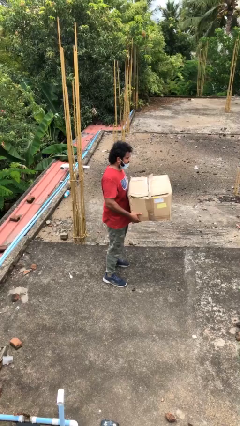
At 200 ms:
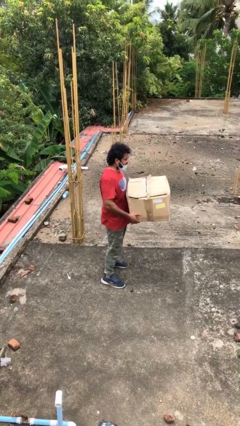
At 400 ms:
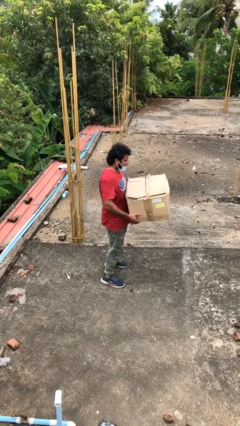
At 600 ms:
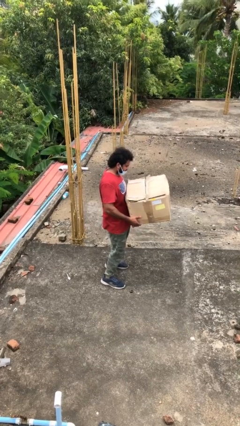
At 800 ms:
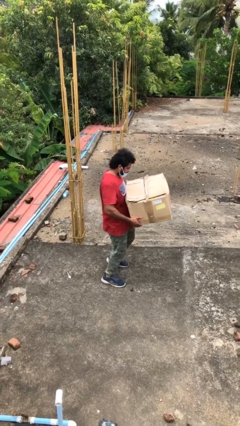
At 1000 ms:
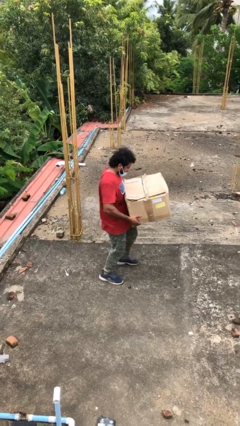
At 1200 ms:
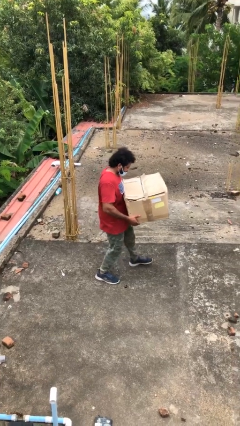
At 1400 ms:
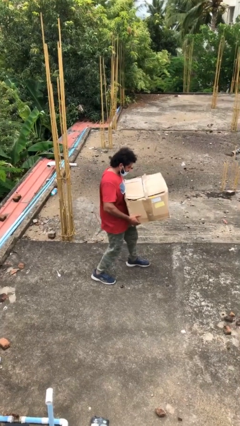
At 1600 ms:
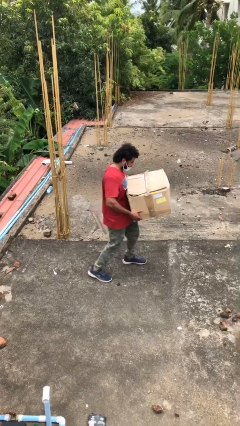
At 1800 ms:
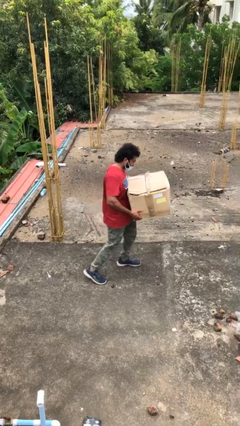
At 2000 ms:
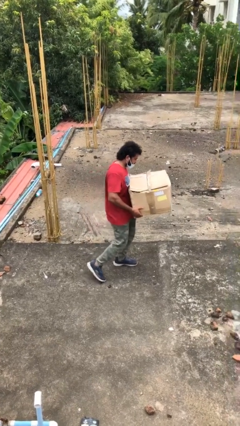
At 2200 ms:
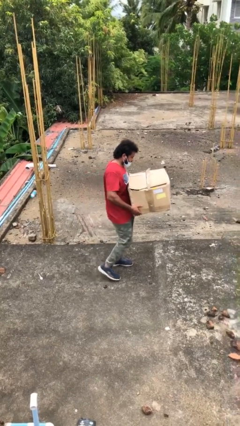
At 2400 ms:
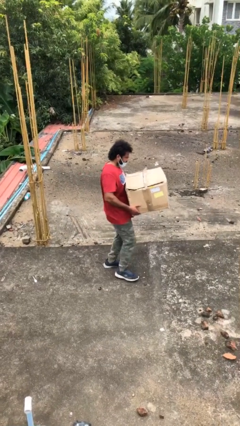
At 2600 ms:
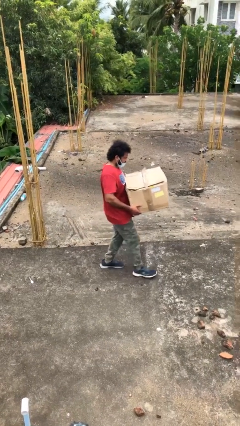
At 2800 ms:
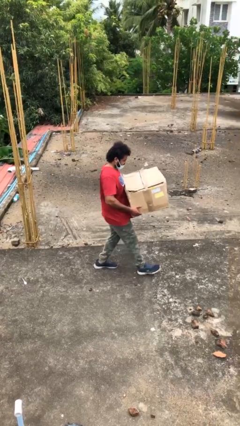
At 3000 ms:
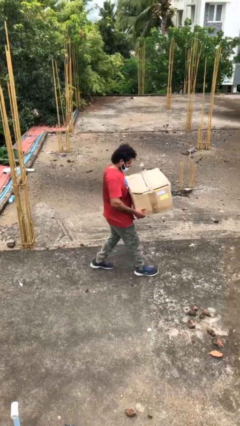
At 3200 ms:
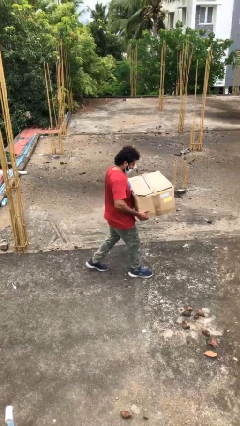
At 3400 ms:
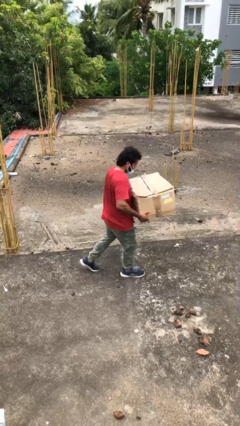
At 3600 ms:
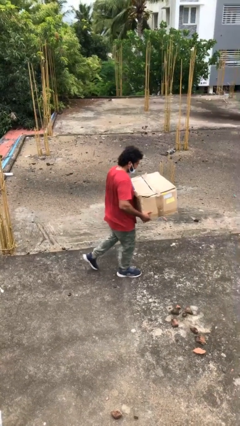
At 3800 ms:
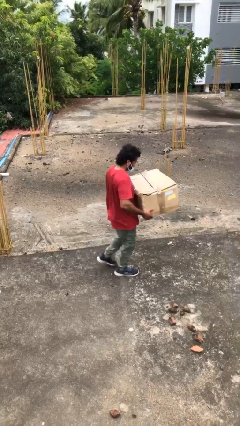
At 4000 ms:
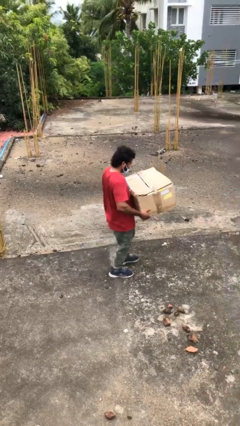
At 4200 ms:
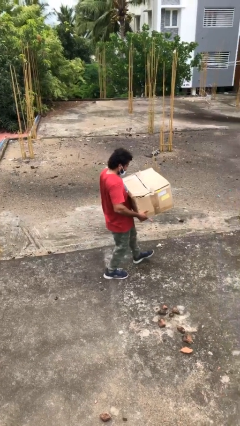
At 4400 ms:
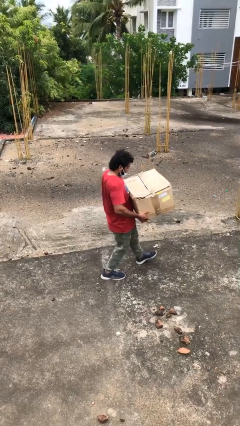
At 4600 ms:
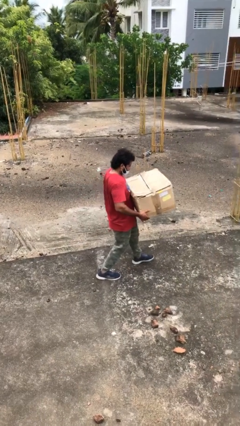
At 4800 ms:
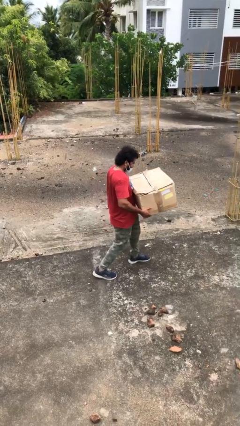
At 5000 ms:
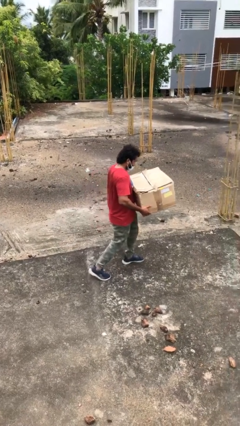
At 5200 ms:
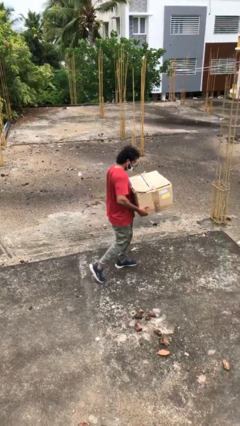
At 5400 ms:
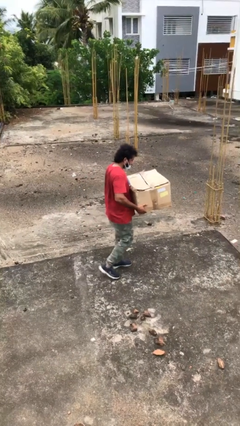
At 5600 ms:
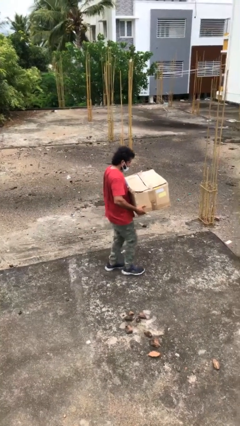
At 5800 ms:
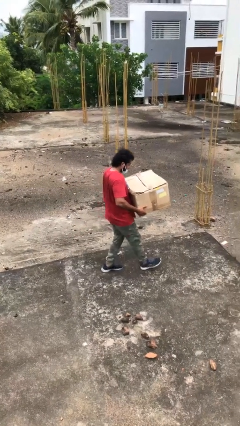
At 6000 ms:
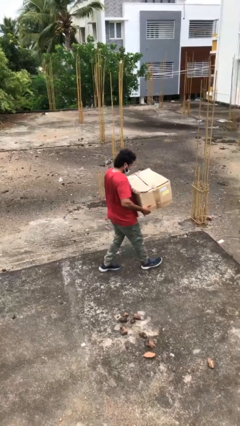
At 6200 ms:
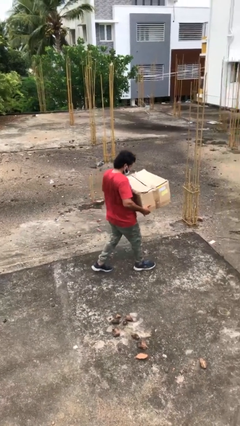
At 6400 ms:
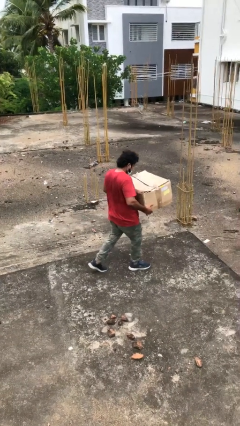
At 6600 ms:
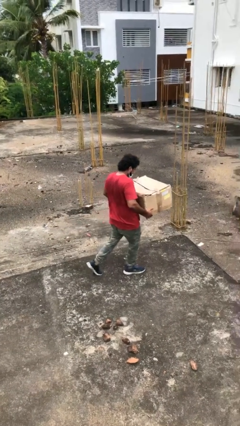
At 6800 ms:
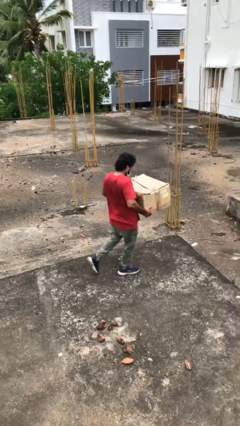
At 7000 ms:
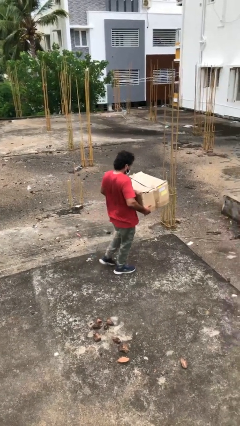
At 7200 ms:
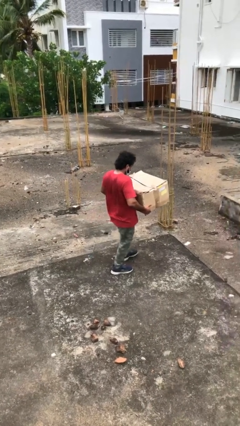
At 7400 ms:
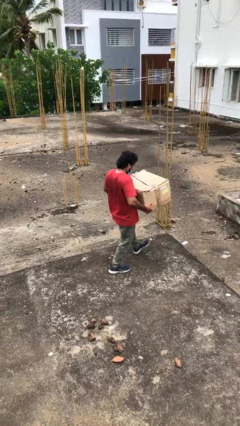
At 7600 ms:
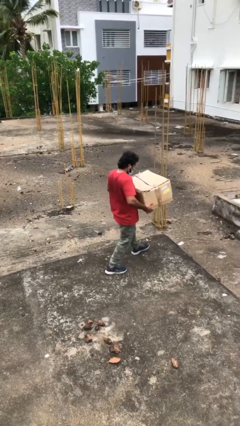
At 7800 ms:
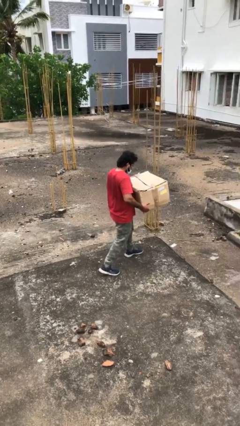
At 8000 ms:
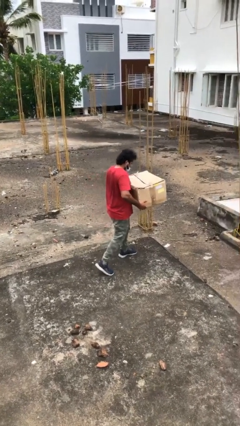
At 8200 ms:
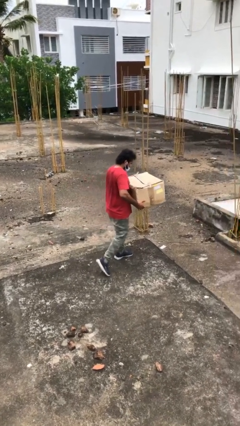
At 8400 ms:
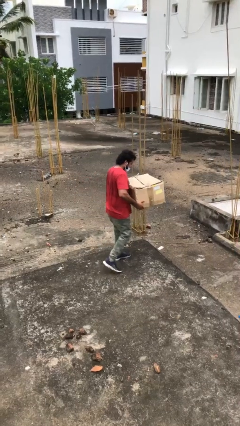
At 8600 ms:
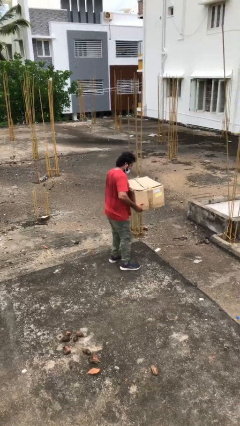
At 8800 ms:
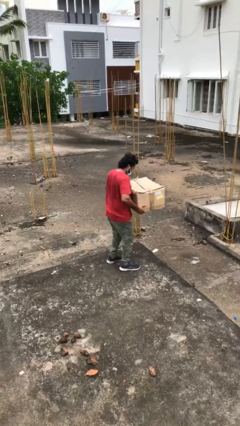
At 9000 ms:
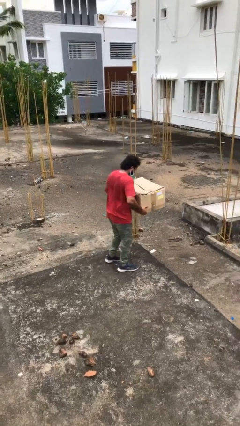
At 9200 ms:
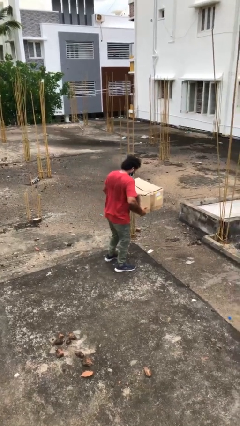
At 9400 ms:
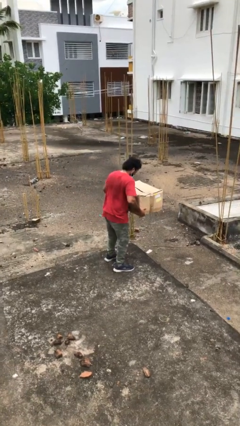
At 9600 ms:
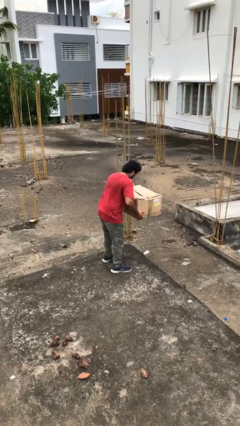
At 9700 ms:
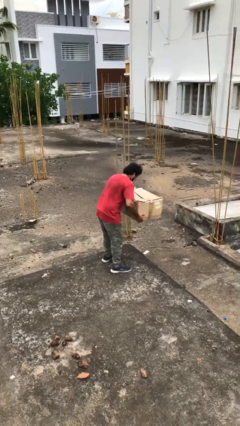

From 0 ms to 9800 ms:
person carries heavy object

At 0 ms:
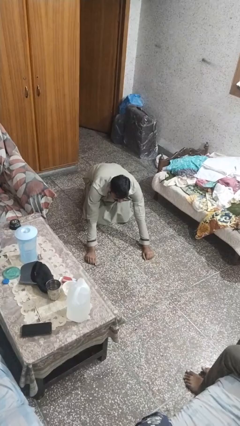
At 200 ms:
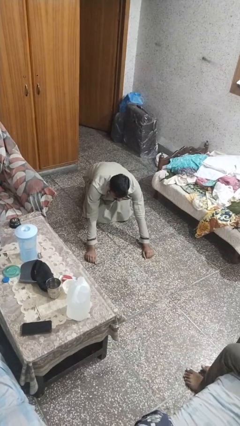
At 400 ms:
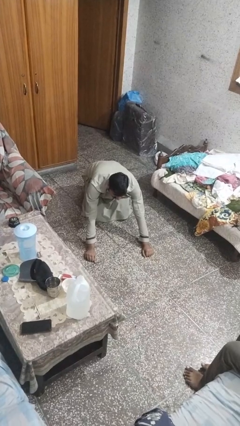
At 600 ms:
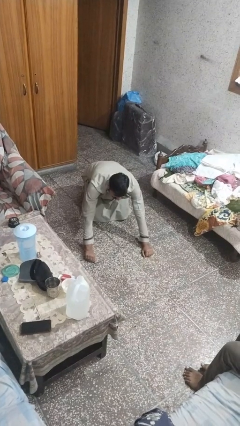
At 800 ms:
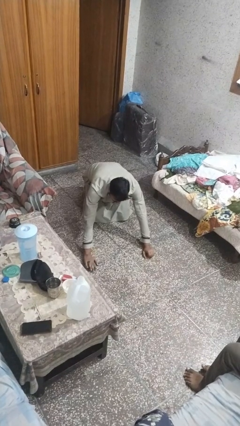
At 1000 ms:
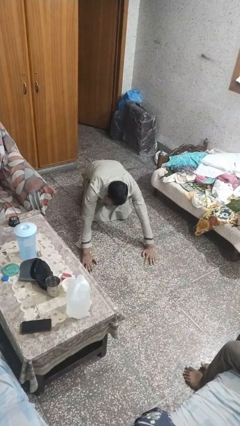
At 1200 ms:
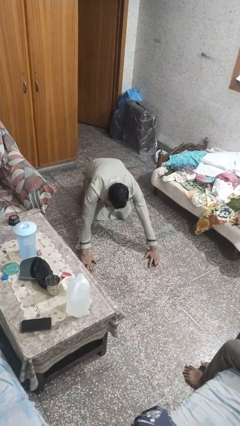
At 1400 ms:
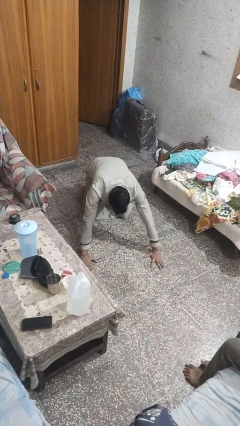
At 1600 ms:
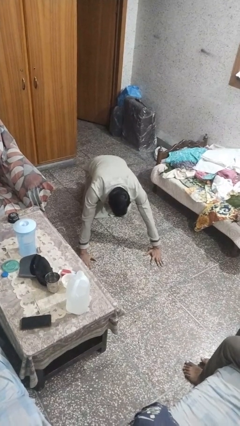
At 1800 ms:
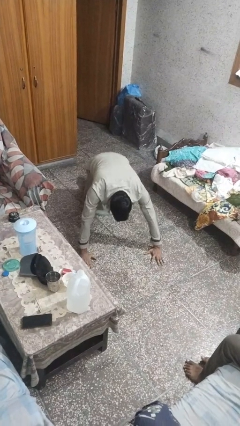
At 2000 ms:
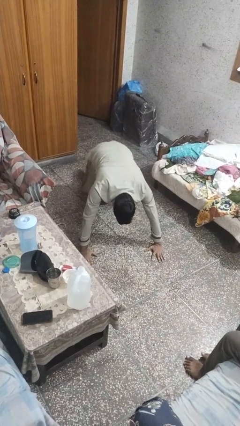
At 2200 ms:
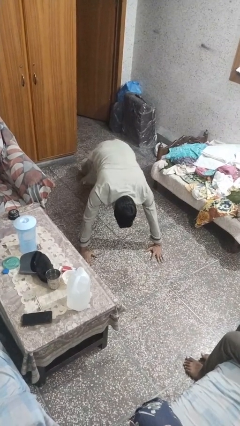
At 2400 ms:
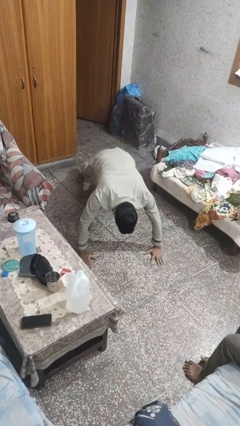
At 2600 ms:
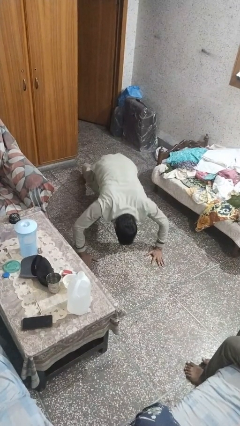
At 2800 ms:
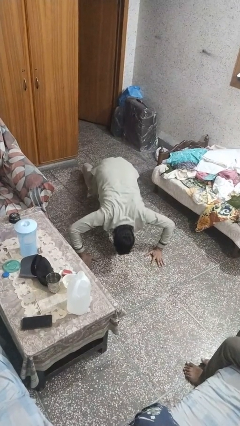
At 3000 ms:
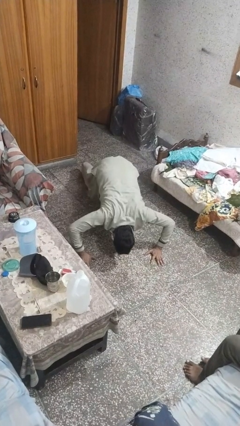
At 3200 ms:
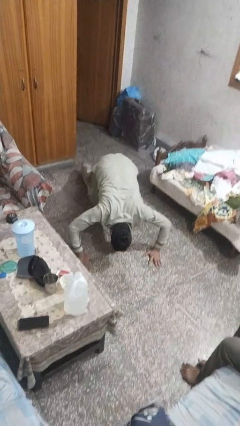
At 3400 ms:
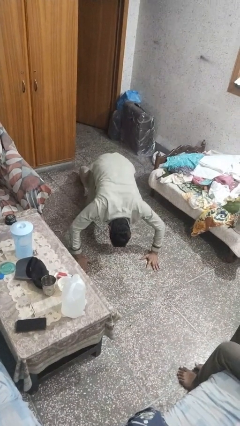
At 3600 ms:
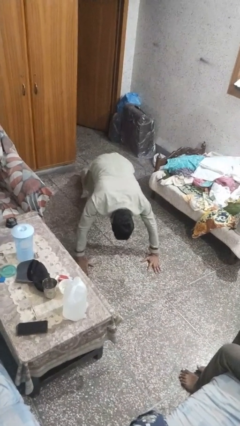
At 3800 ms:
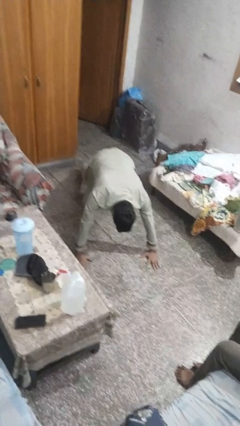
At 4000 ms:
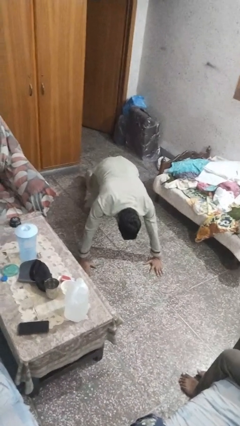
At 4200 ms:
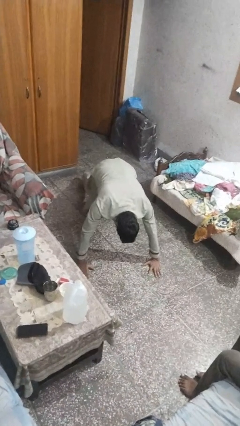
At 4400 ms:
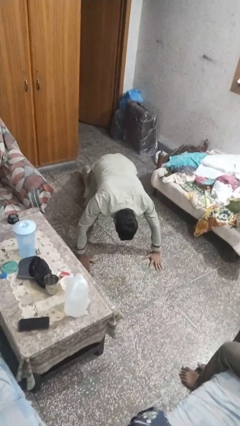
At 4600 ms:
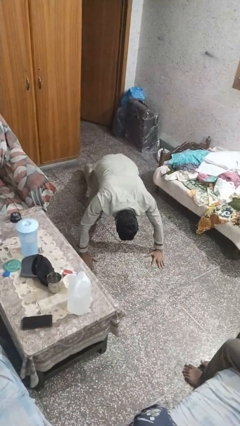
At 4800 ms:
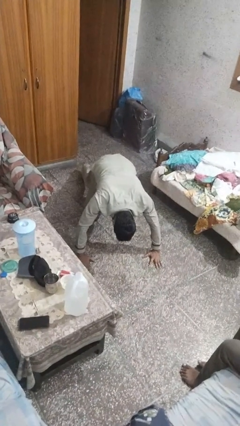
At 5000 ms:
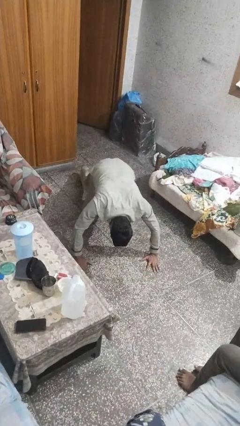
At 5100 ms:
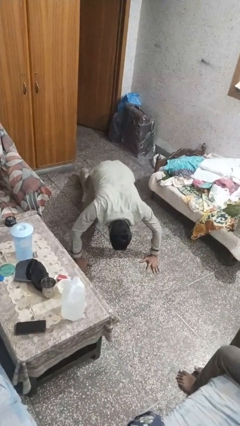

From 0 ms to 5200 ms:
person exercises with pushup

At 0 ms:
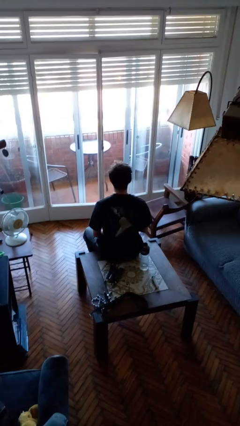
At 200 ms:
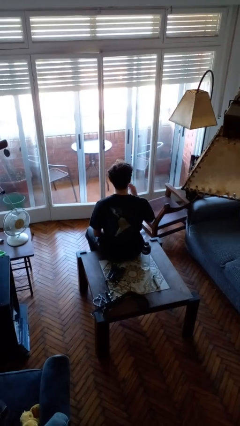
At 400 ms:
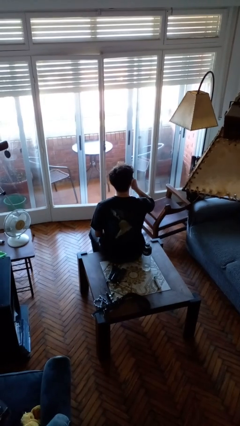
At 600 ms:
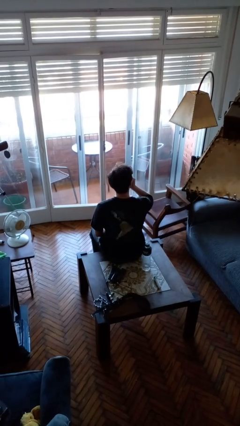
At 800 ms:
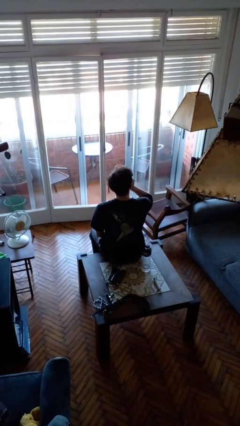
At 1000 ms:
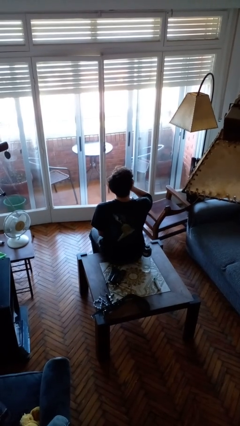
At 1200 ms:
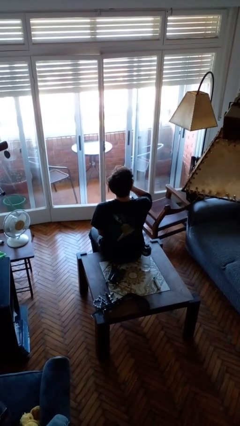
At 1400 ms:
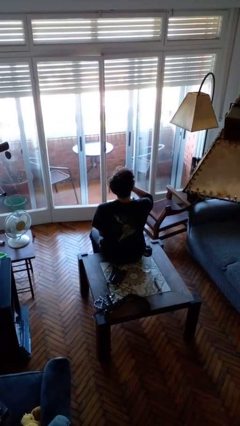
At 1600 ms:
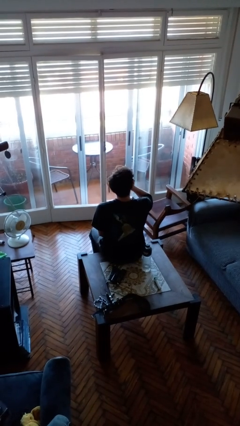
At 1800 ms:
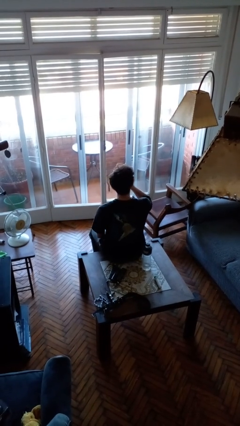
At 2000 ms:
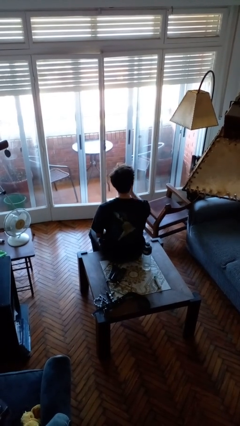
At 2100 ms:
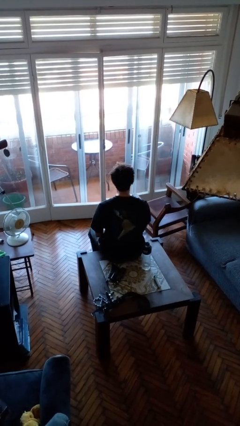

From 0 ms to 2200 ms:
person yawns

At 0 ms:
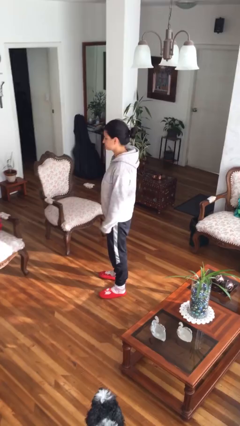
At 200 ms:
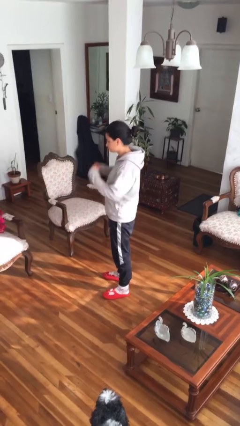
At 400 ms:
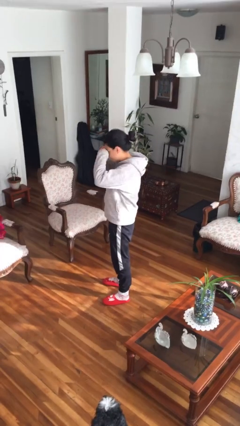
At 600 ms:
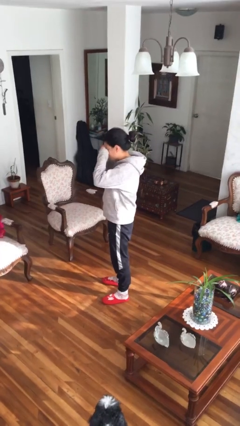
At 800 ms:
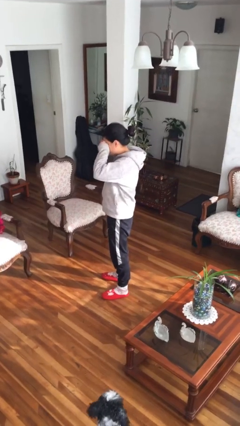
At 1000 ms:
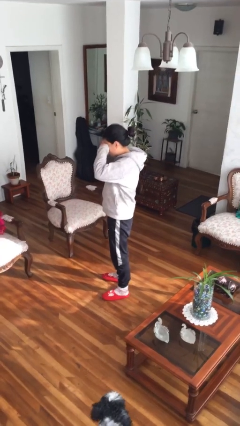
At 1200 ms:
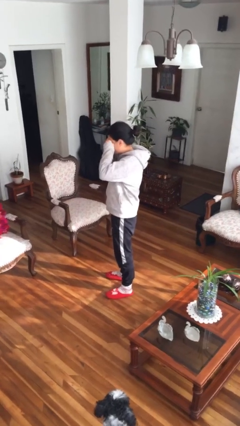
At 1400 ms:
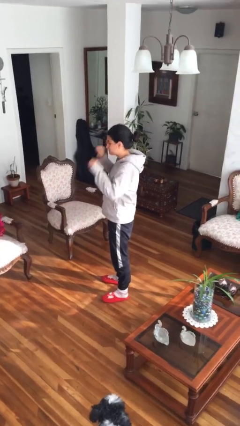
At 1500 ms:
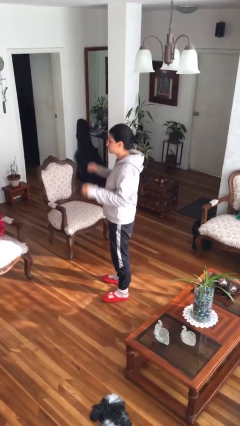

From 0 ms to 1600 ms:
person rubs eyes
